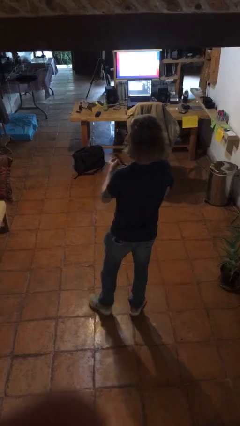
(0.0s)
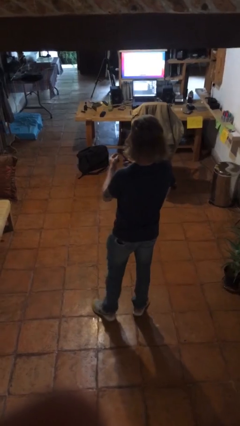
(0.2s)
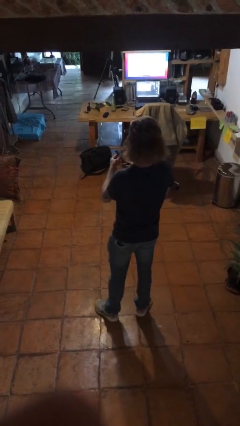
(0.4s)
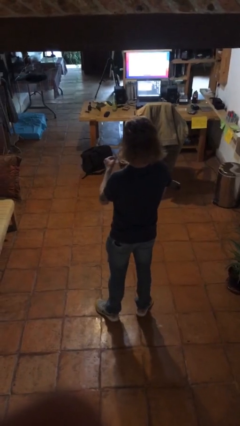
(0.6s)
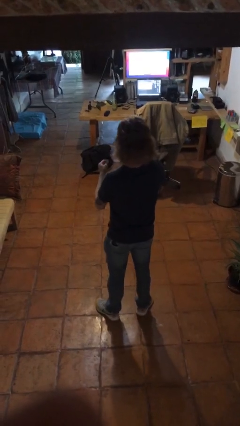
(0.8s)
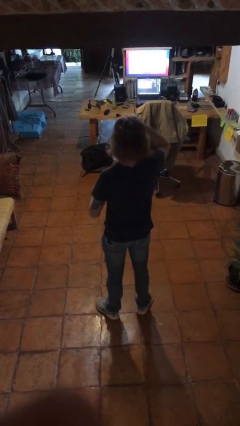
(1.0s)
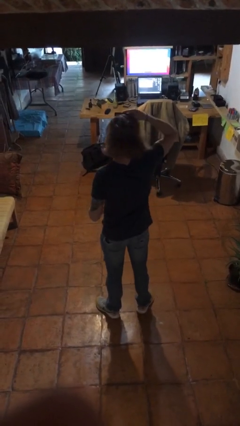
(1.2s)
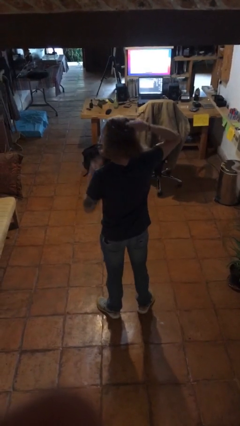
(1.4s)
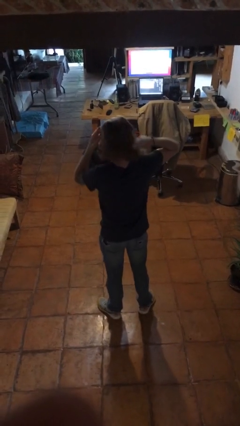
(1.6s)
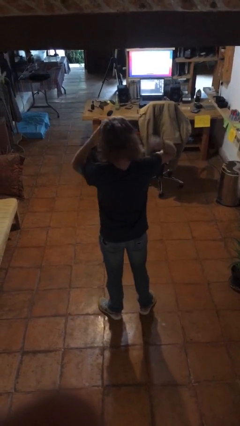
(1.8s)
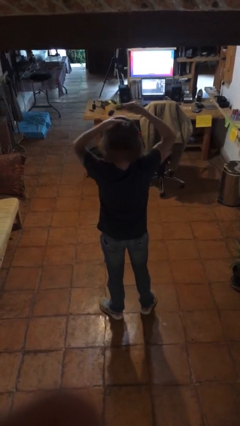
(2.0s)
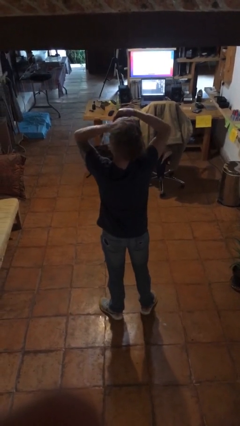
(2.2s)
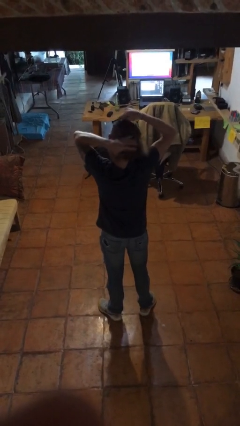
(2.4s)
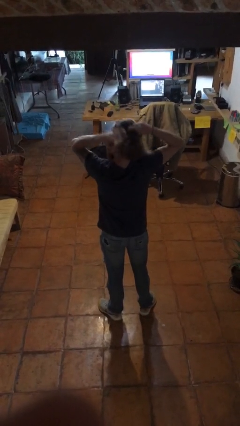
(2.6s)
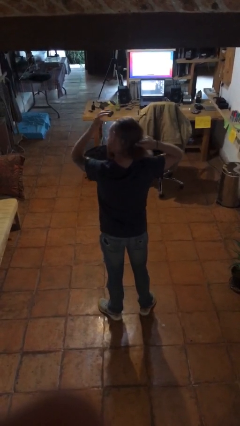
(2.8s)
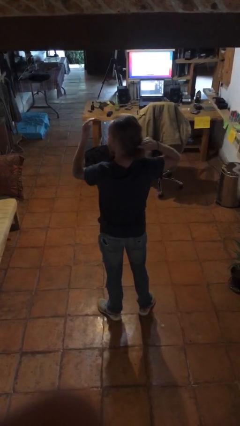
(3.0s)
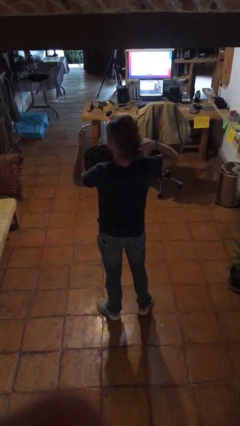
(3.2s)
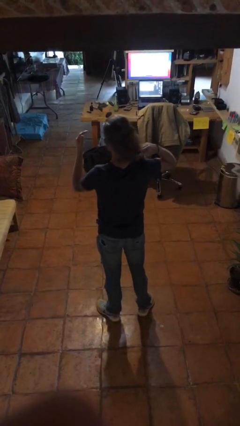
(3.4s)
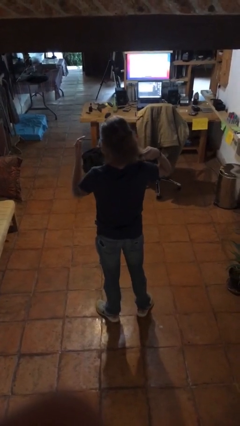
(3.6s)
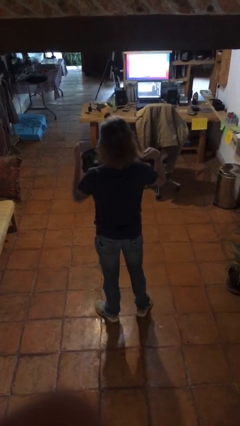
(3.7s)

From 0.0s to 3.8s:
person brushes hair

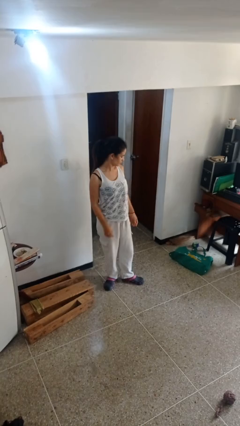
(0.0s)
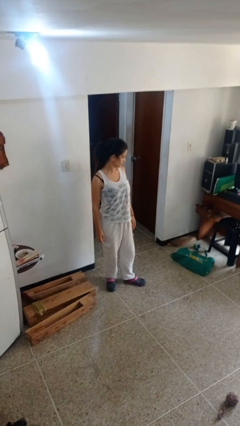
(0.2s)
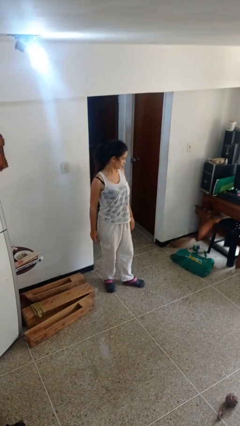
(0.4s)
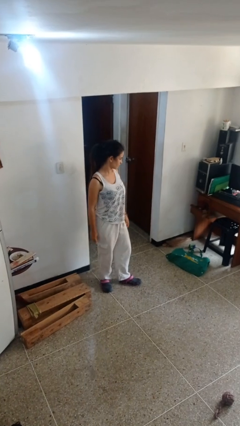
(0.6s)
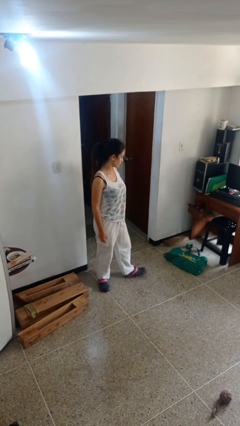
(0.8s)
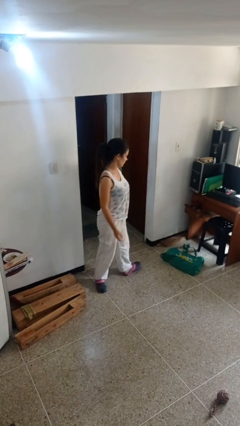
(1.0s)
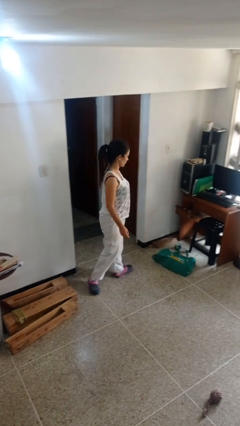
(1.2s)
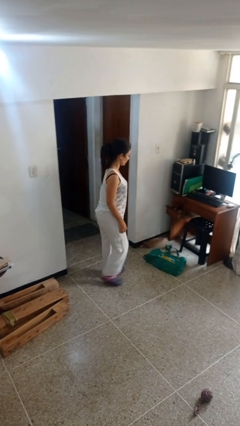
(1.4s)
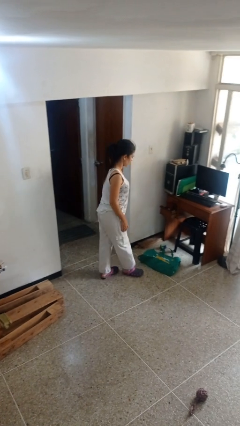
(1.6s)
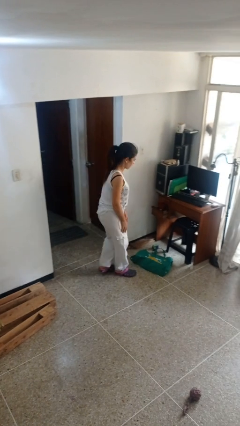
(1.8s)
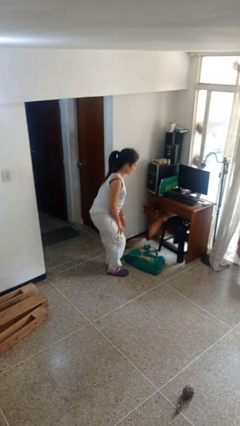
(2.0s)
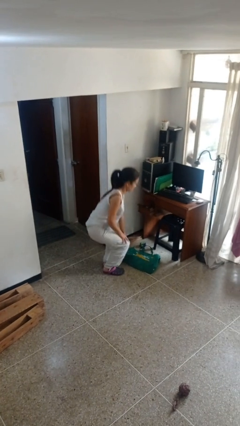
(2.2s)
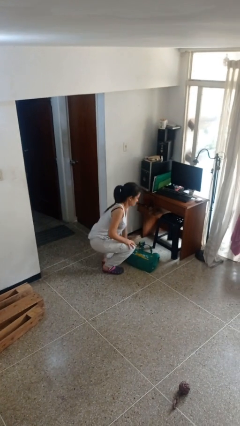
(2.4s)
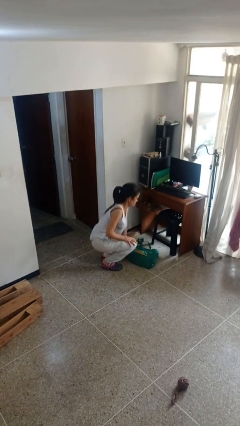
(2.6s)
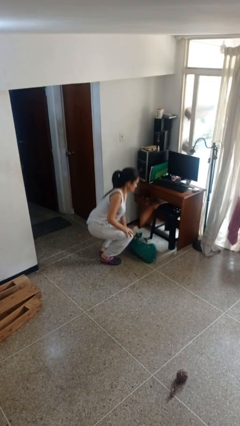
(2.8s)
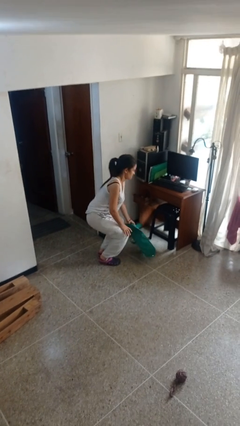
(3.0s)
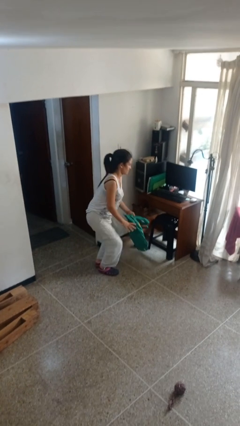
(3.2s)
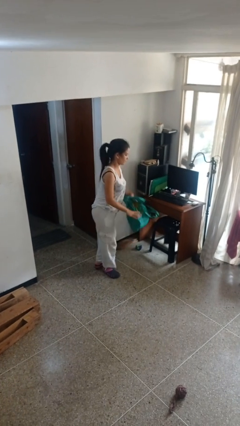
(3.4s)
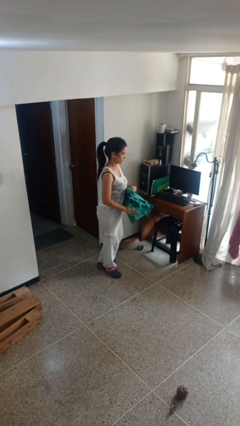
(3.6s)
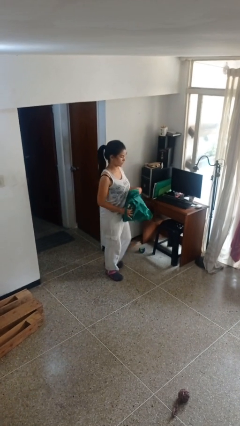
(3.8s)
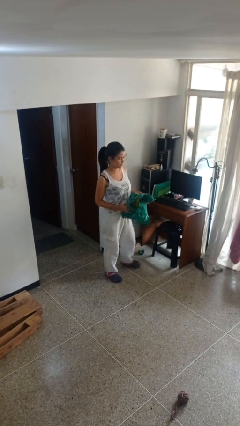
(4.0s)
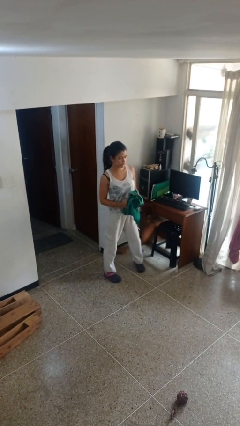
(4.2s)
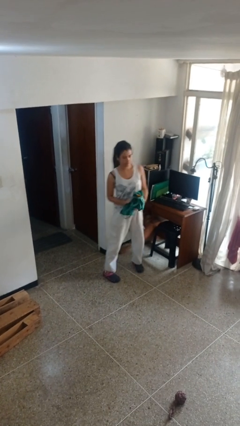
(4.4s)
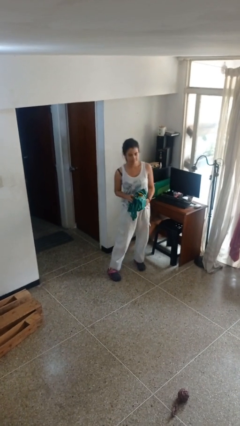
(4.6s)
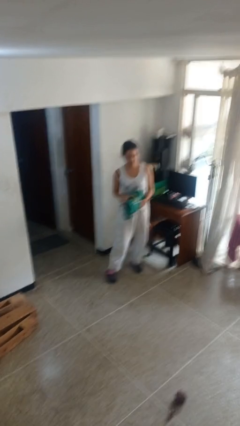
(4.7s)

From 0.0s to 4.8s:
person picks up object from floor

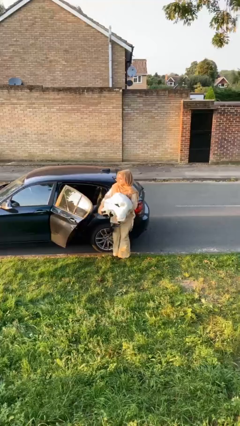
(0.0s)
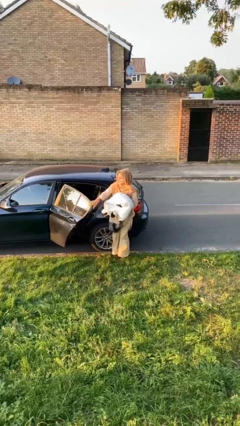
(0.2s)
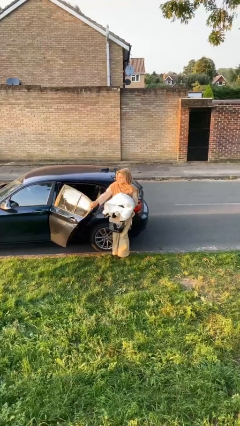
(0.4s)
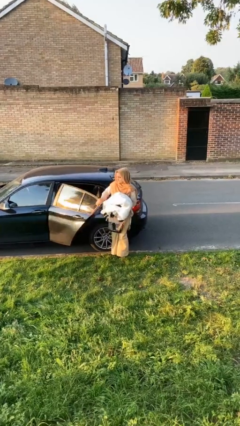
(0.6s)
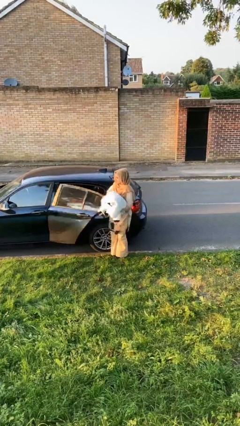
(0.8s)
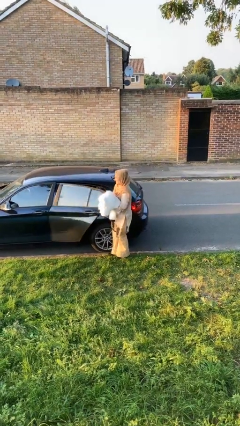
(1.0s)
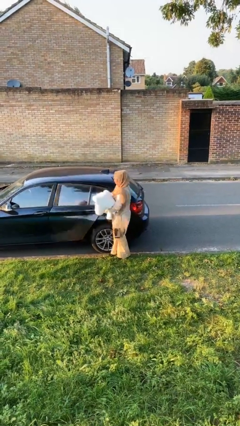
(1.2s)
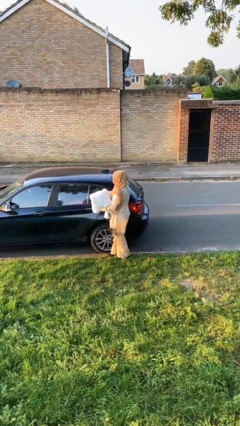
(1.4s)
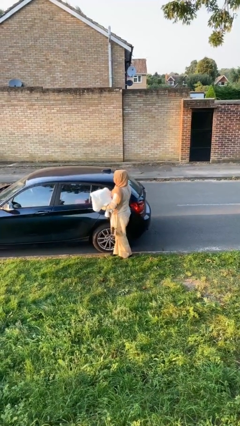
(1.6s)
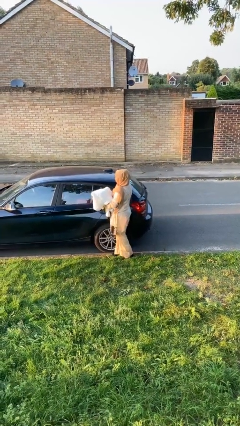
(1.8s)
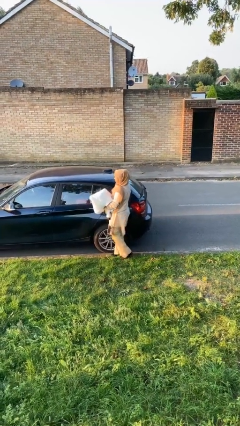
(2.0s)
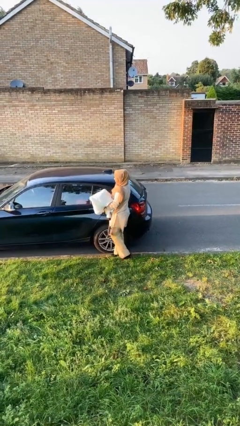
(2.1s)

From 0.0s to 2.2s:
person closes car door

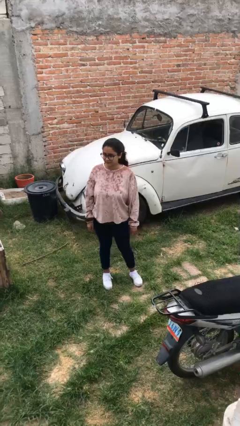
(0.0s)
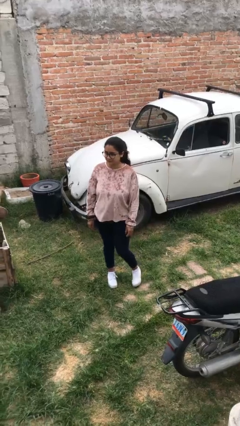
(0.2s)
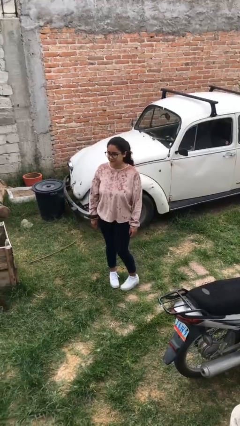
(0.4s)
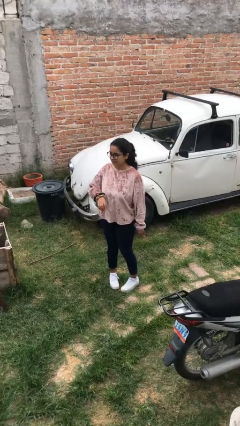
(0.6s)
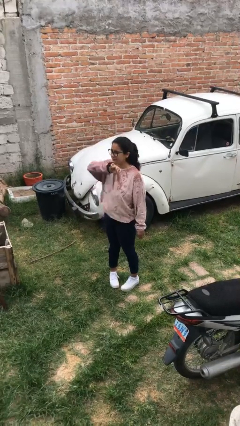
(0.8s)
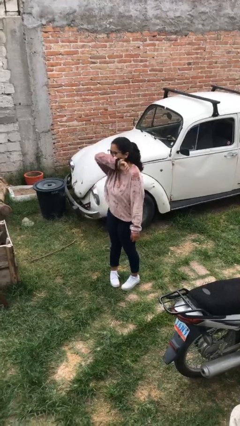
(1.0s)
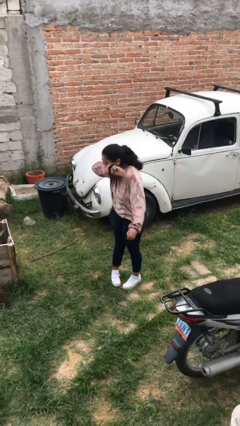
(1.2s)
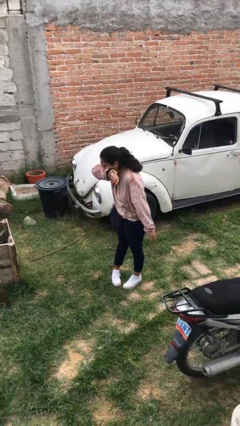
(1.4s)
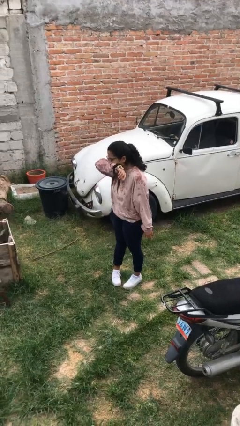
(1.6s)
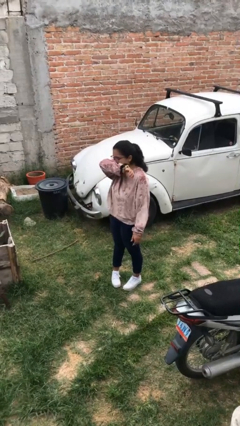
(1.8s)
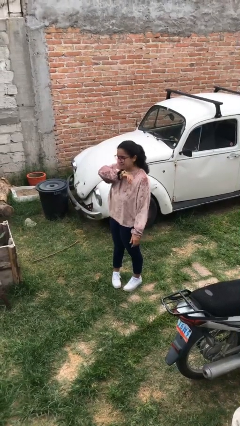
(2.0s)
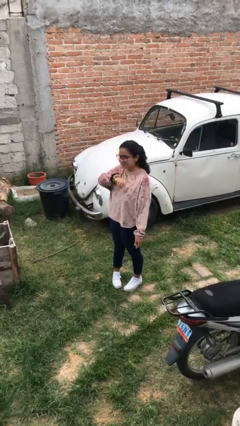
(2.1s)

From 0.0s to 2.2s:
person sneezes into arm

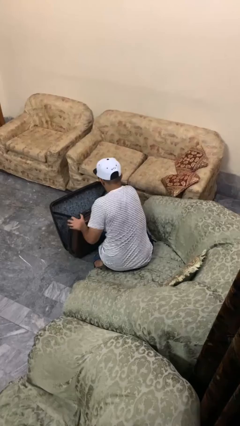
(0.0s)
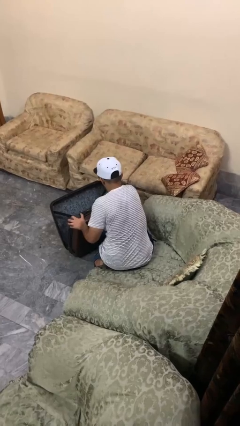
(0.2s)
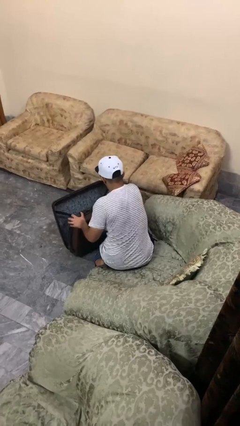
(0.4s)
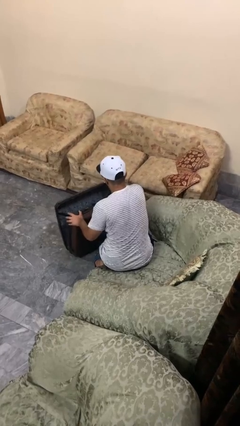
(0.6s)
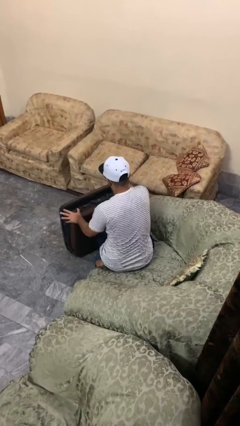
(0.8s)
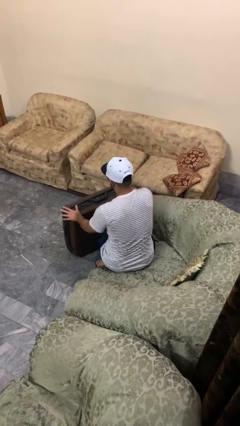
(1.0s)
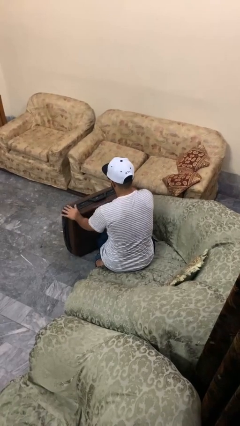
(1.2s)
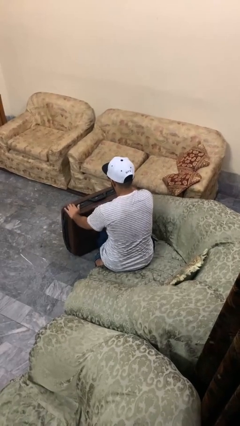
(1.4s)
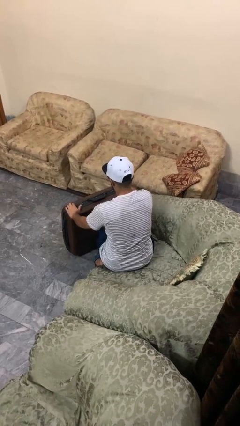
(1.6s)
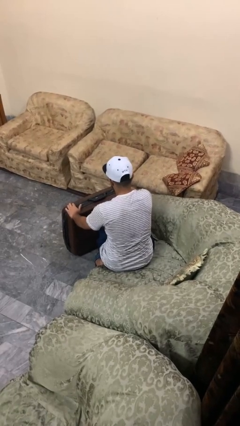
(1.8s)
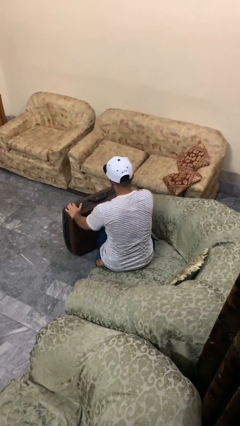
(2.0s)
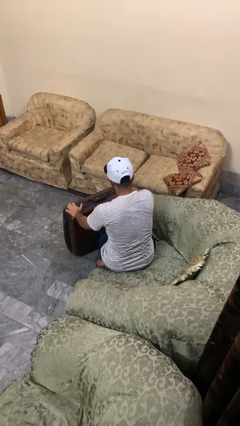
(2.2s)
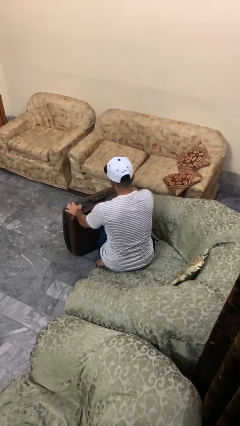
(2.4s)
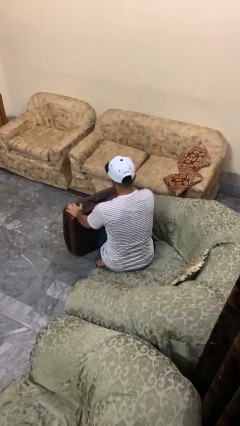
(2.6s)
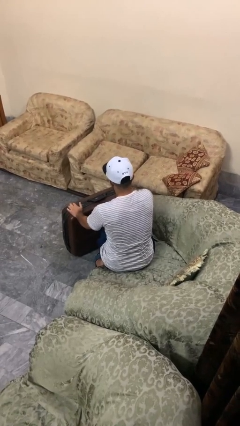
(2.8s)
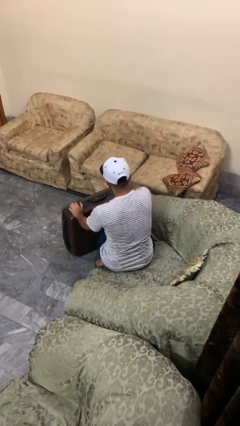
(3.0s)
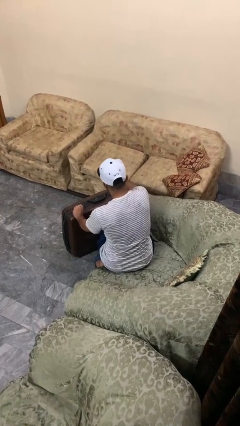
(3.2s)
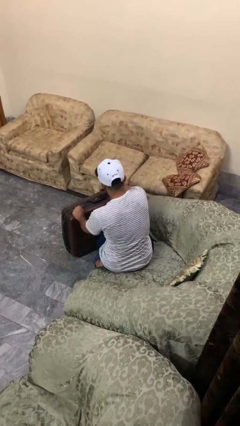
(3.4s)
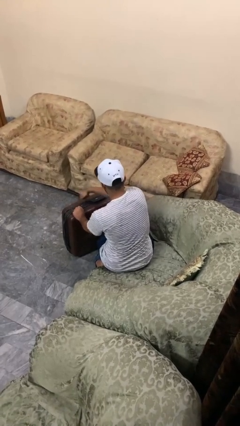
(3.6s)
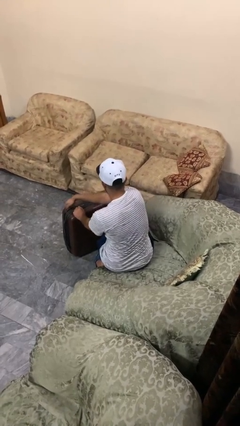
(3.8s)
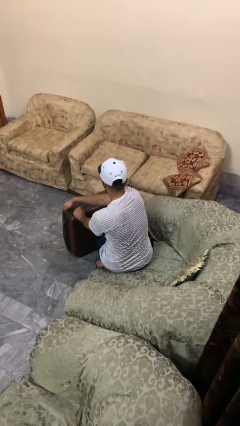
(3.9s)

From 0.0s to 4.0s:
person closes suitcase

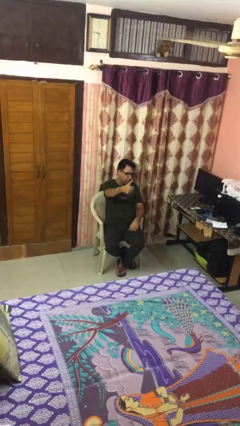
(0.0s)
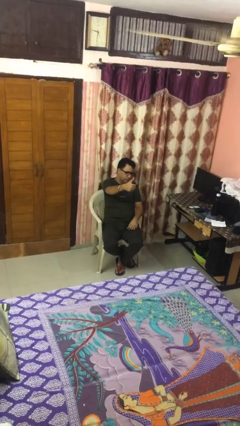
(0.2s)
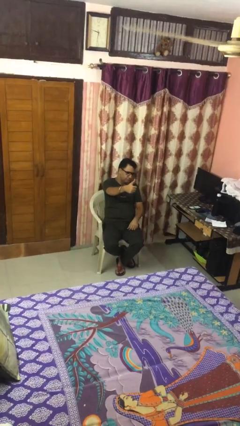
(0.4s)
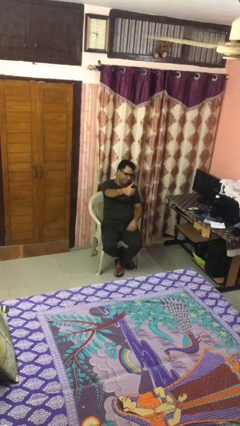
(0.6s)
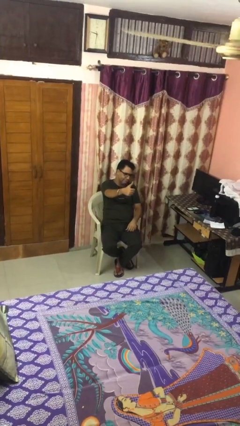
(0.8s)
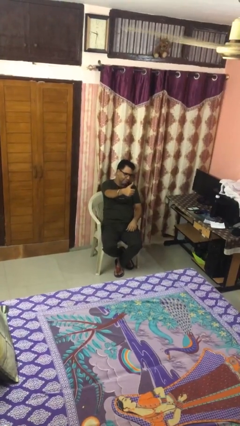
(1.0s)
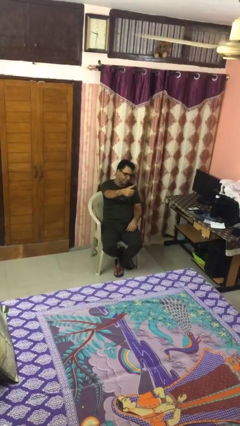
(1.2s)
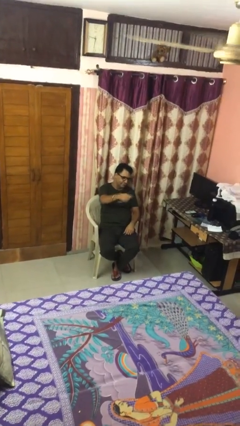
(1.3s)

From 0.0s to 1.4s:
person gestures thumbs up
